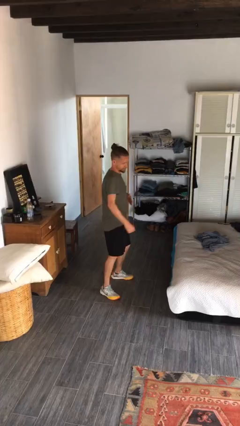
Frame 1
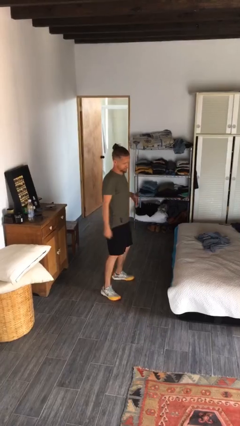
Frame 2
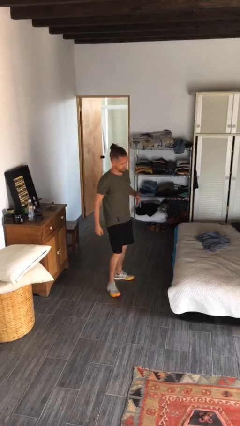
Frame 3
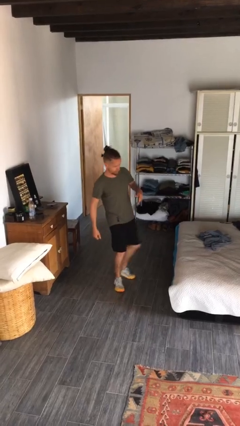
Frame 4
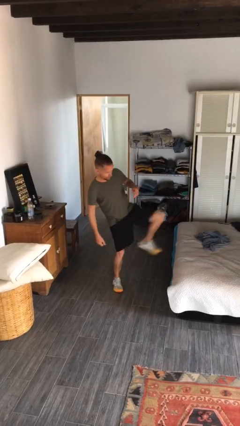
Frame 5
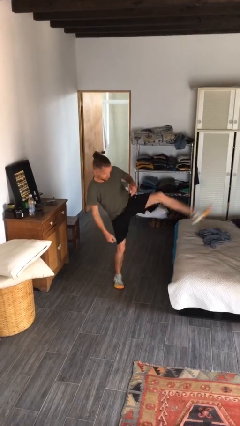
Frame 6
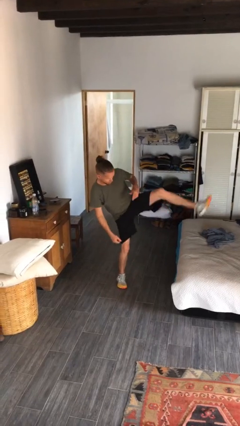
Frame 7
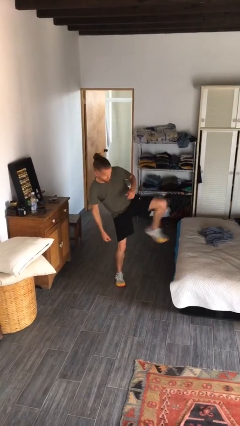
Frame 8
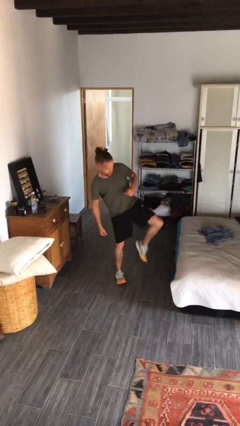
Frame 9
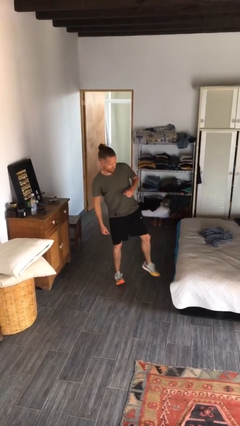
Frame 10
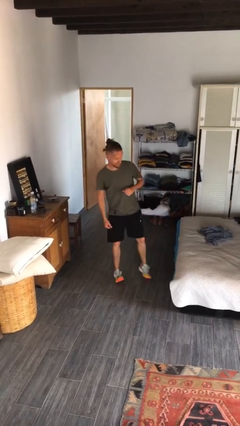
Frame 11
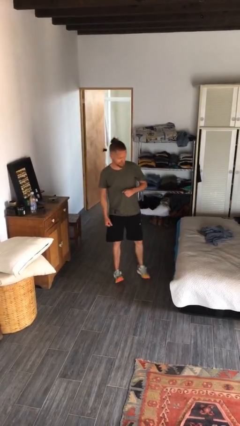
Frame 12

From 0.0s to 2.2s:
person karate kicks

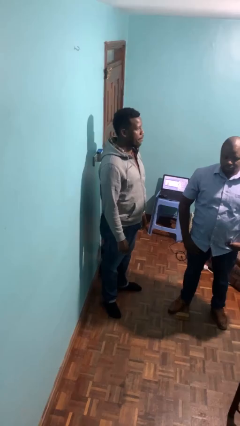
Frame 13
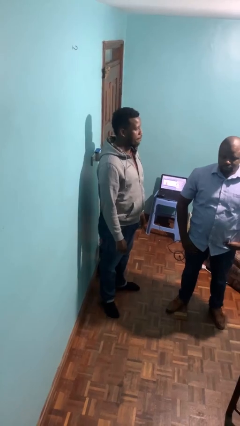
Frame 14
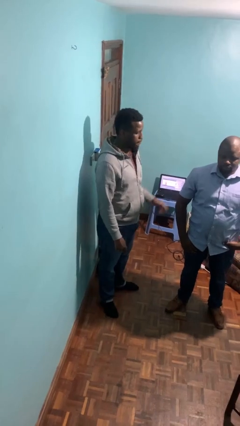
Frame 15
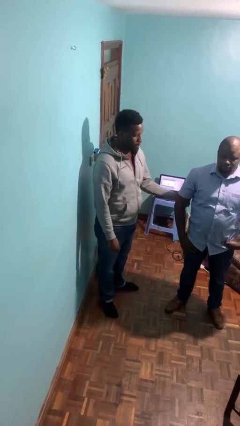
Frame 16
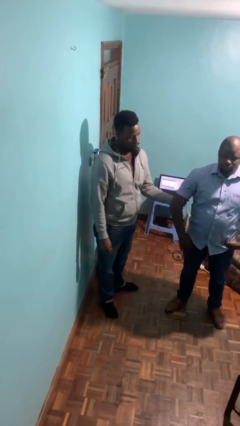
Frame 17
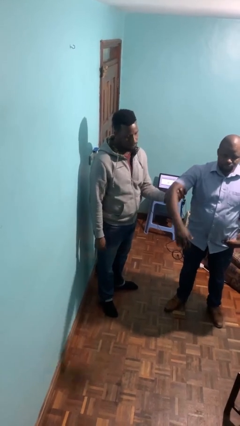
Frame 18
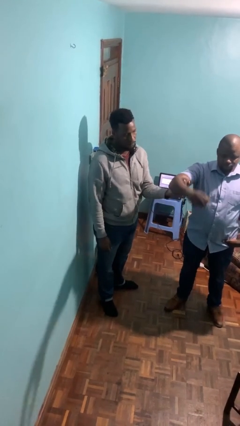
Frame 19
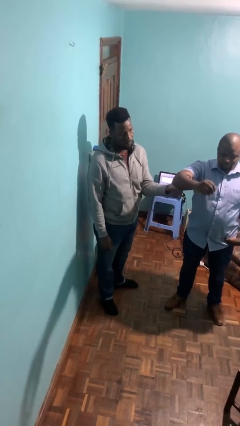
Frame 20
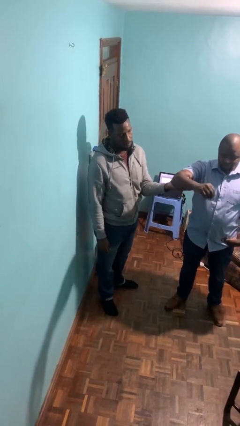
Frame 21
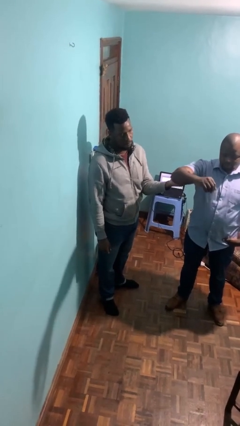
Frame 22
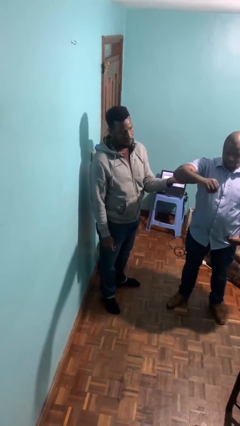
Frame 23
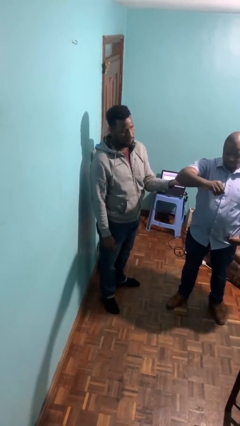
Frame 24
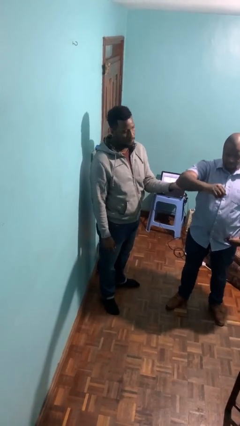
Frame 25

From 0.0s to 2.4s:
person grabs person by bicep

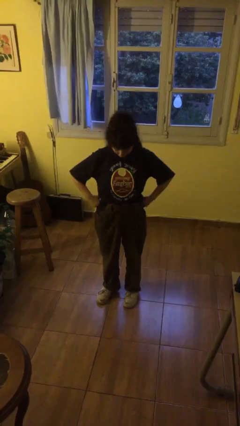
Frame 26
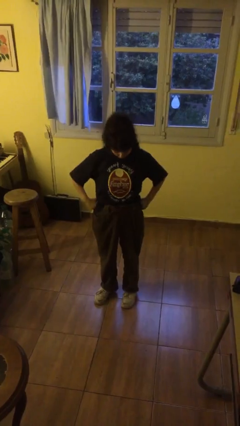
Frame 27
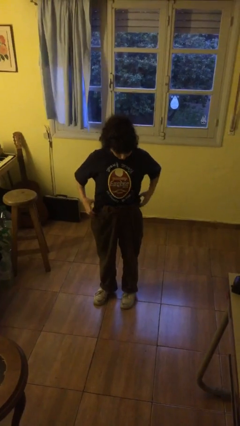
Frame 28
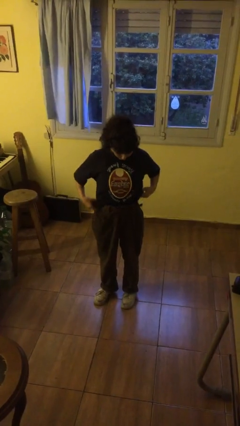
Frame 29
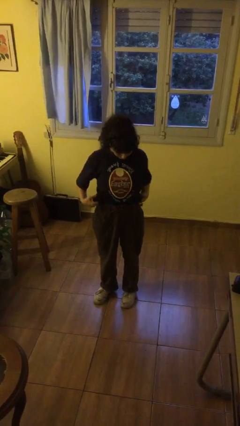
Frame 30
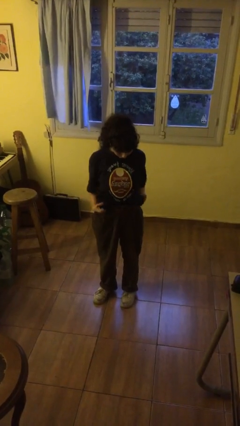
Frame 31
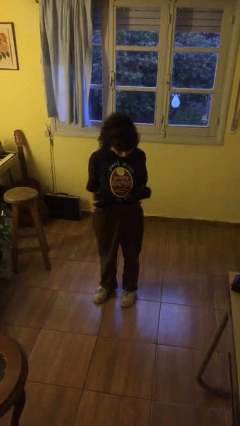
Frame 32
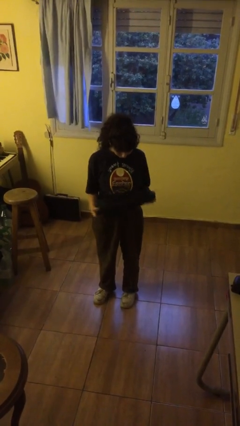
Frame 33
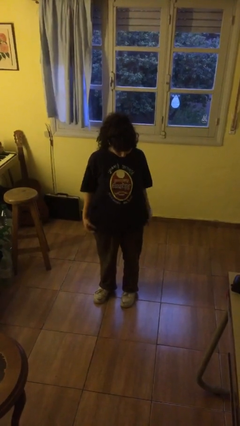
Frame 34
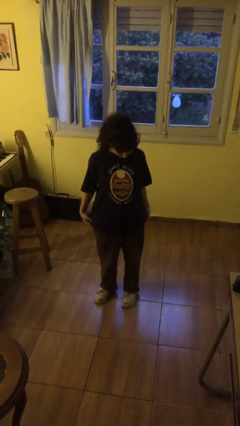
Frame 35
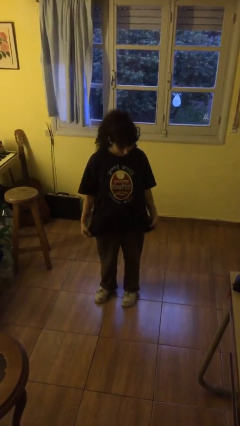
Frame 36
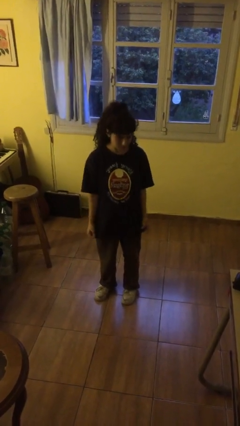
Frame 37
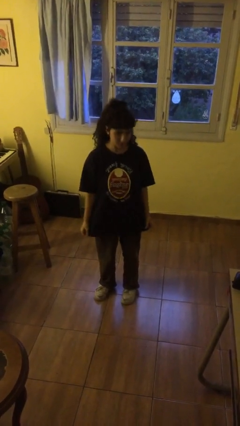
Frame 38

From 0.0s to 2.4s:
person untucks shirt

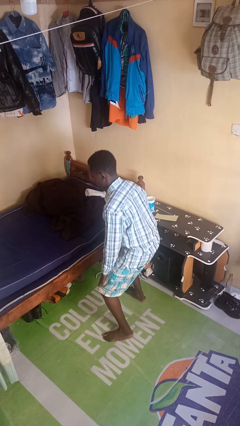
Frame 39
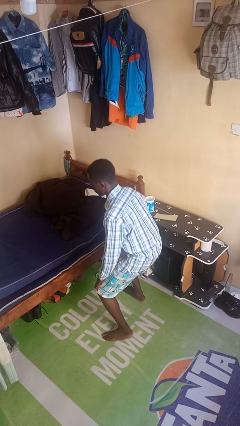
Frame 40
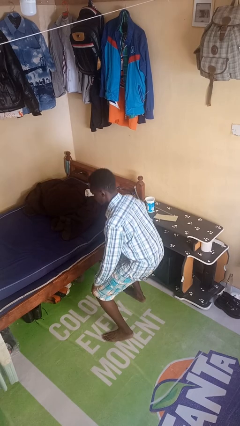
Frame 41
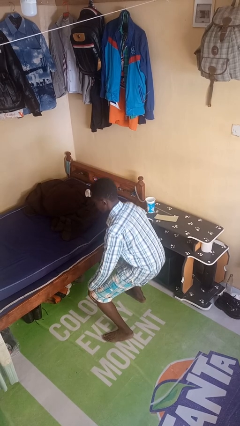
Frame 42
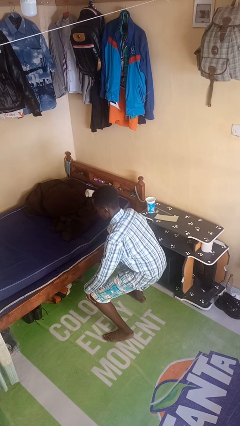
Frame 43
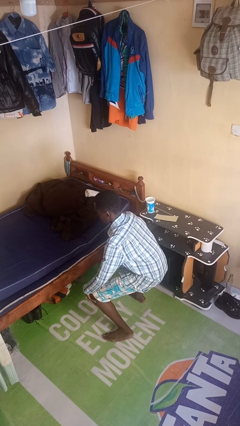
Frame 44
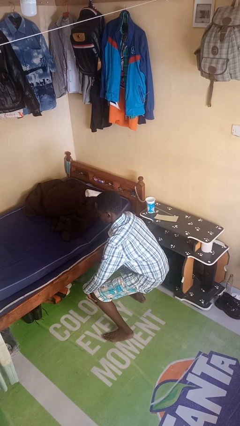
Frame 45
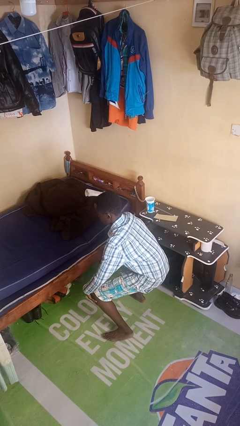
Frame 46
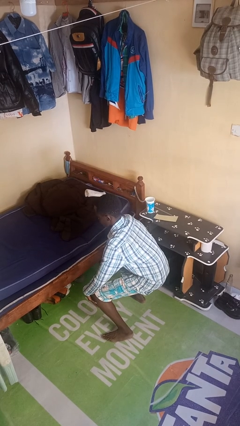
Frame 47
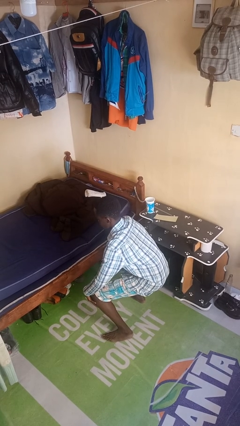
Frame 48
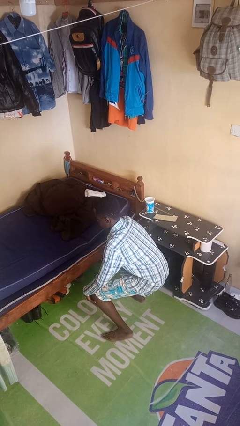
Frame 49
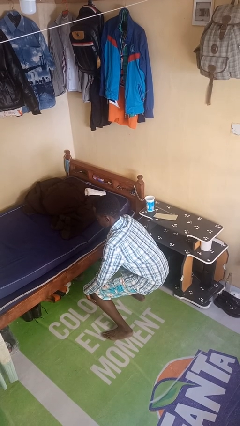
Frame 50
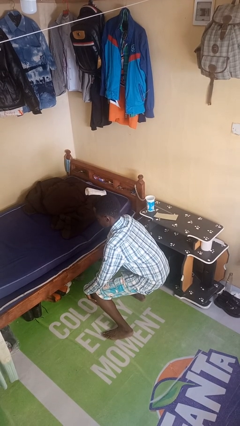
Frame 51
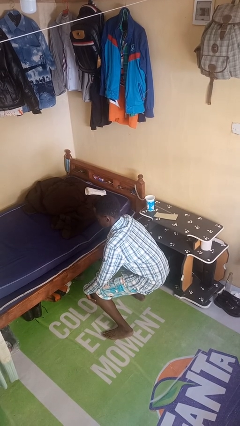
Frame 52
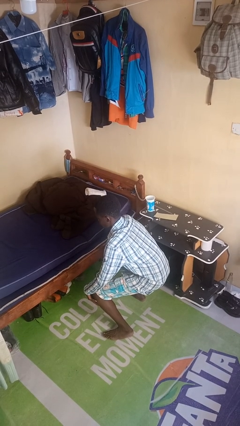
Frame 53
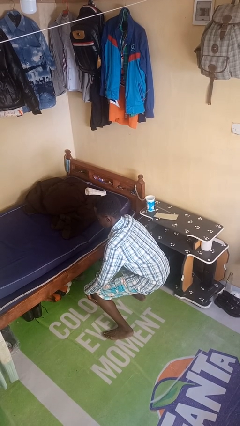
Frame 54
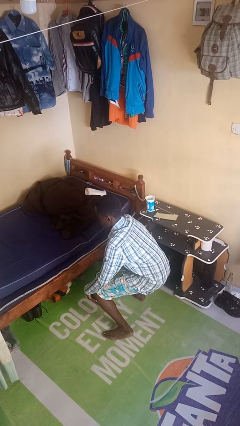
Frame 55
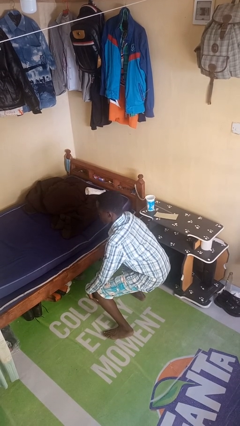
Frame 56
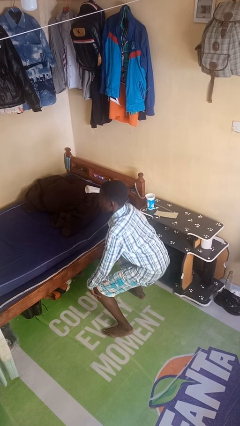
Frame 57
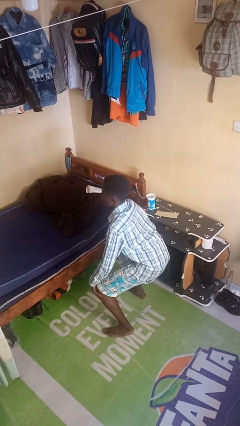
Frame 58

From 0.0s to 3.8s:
person squats

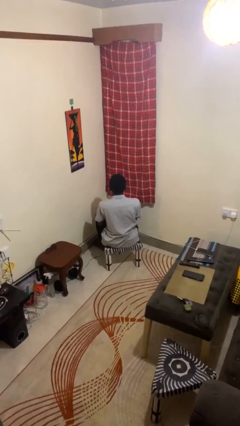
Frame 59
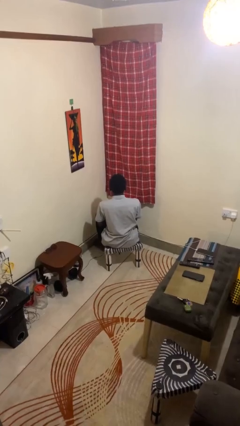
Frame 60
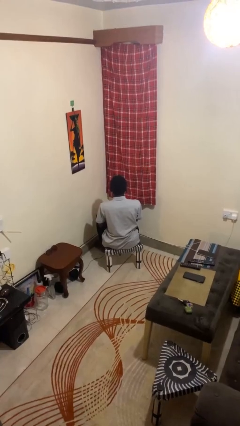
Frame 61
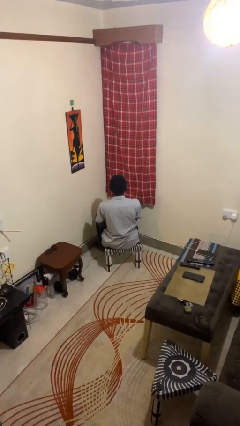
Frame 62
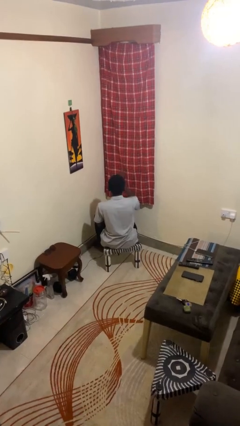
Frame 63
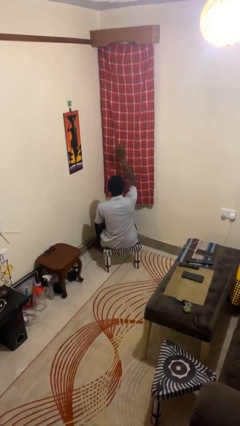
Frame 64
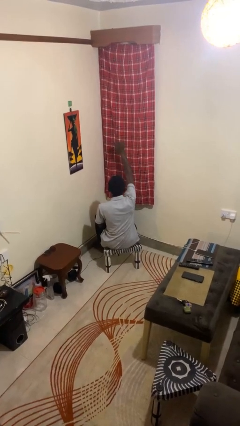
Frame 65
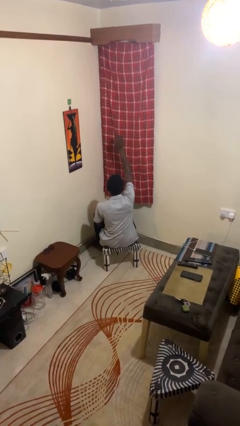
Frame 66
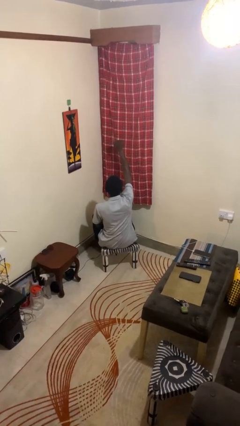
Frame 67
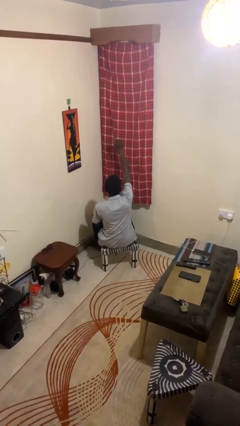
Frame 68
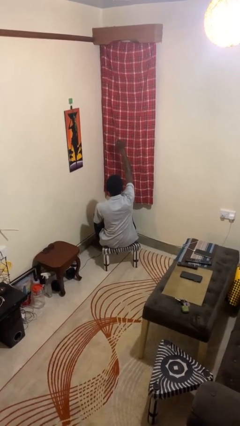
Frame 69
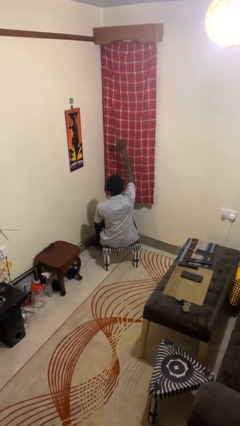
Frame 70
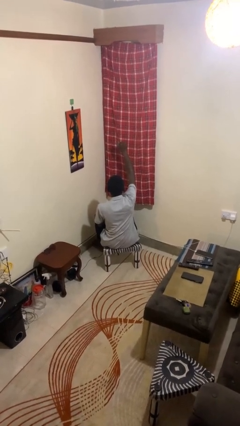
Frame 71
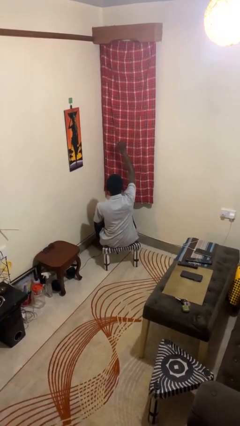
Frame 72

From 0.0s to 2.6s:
person gestures come here

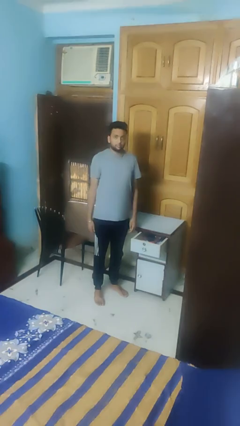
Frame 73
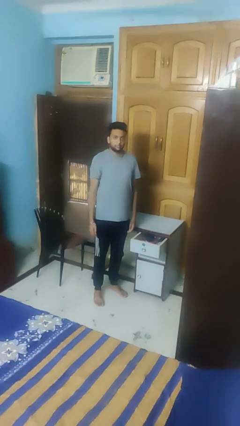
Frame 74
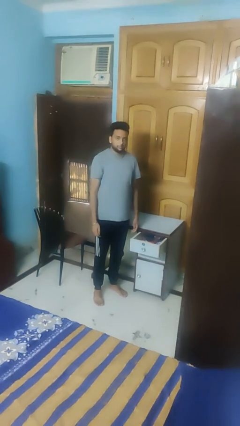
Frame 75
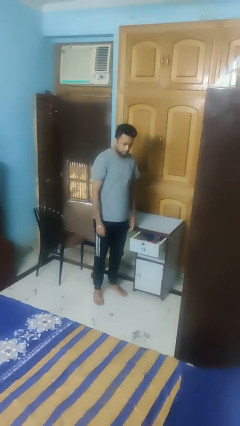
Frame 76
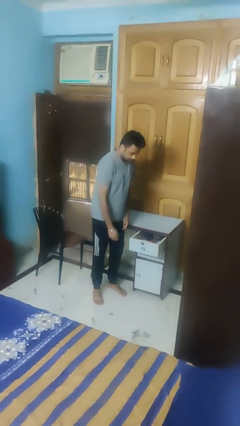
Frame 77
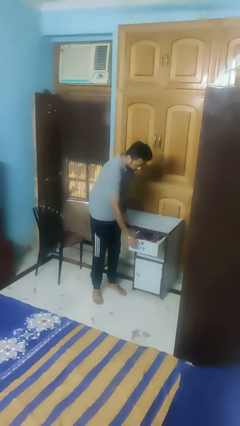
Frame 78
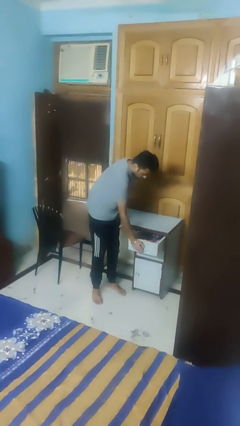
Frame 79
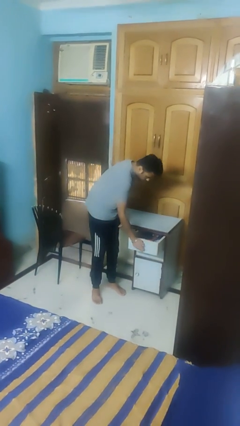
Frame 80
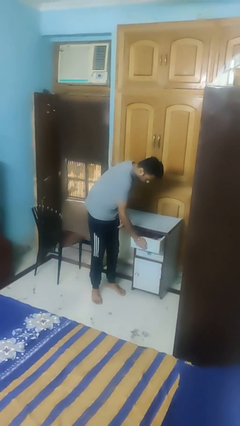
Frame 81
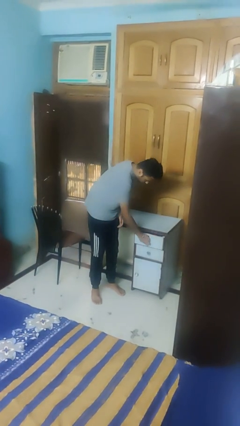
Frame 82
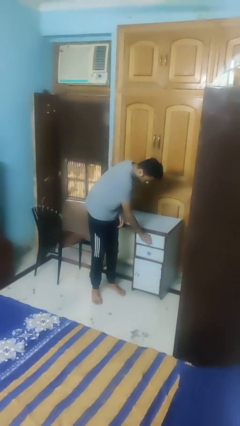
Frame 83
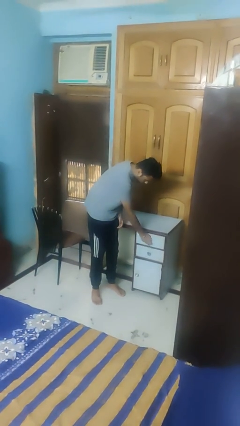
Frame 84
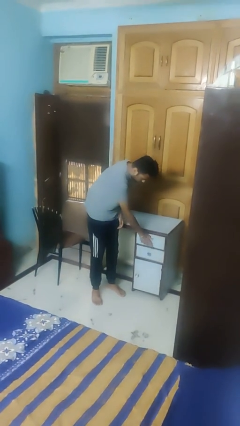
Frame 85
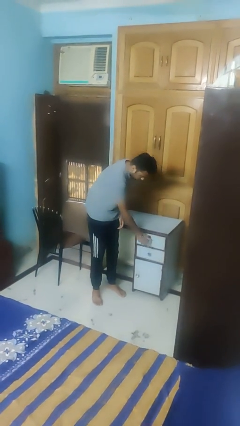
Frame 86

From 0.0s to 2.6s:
person closes dresser drawer

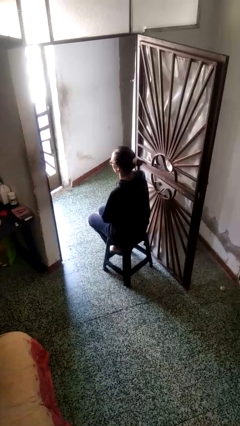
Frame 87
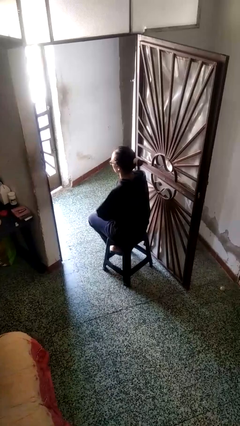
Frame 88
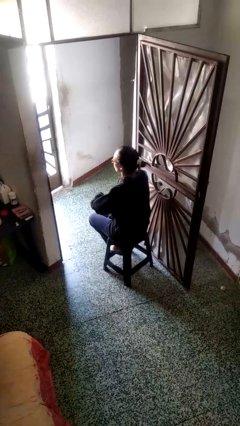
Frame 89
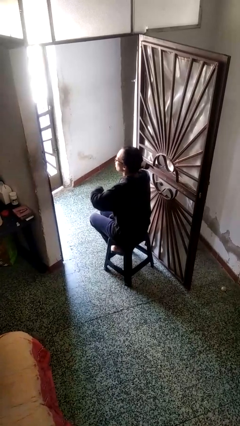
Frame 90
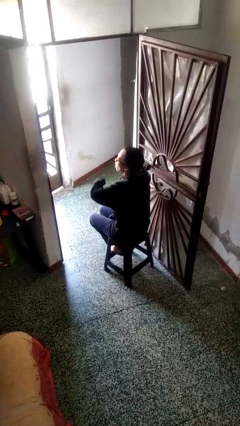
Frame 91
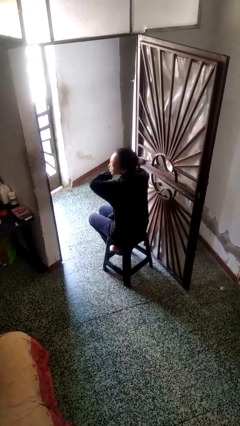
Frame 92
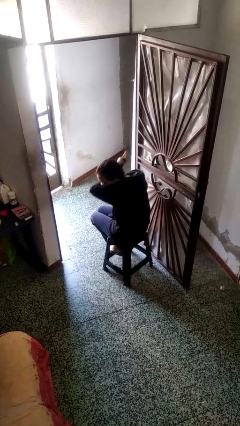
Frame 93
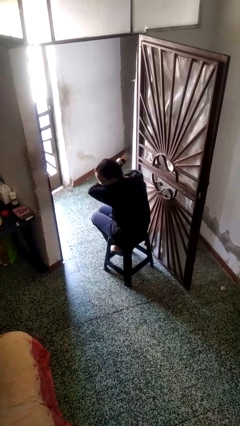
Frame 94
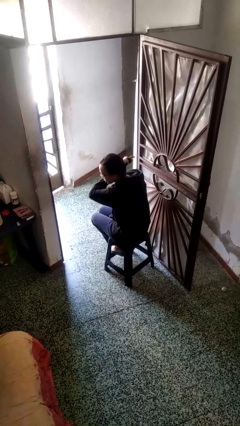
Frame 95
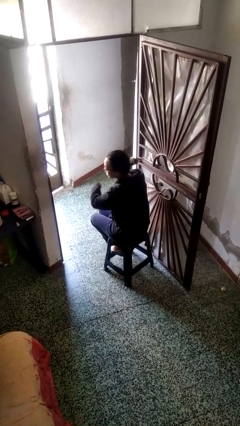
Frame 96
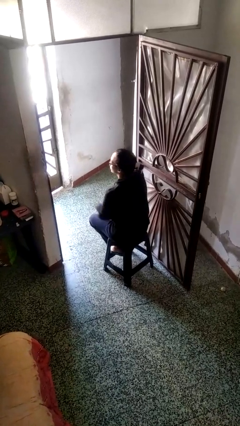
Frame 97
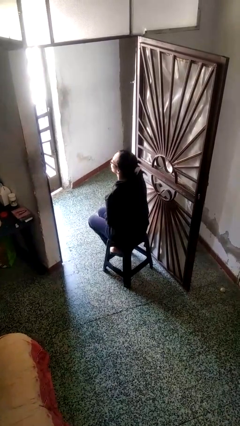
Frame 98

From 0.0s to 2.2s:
person sneezes into arm
